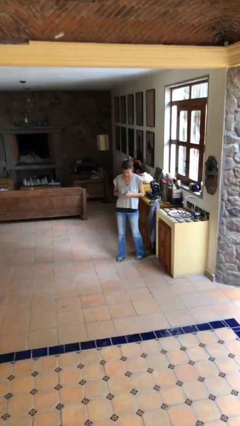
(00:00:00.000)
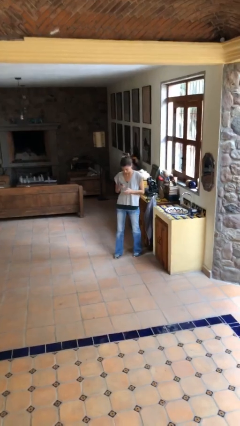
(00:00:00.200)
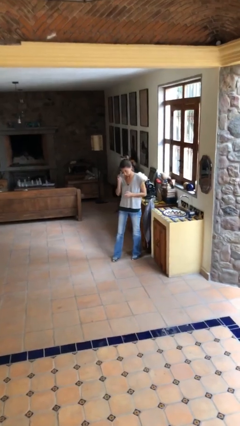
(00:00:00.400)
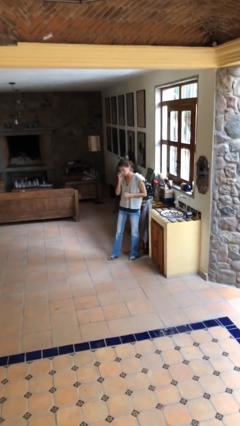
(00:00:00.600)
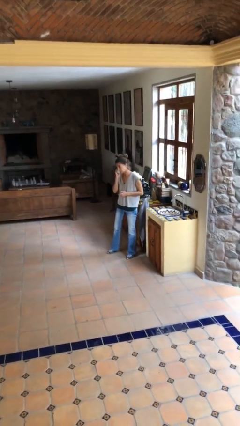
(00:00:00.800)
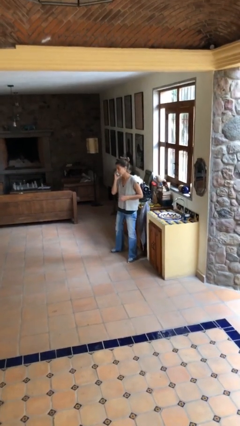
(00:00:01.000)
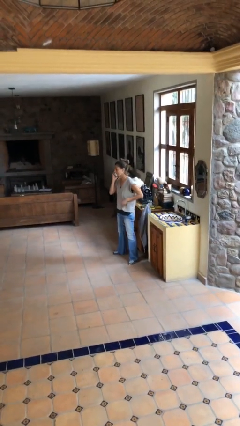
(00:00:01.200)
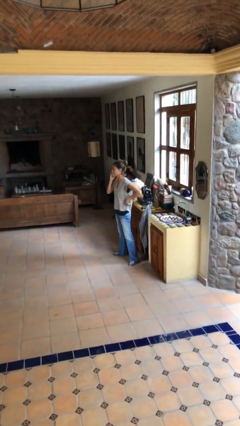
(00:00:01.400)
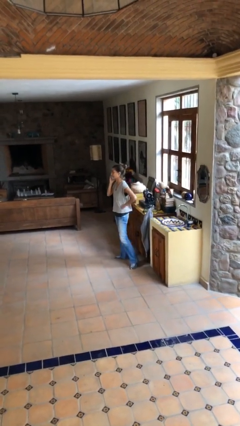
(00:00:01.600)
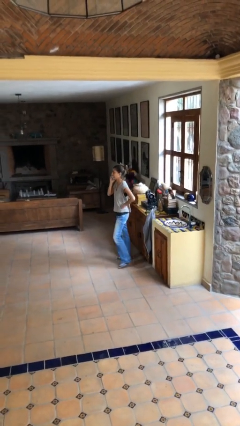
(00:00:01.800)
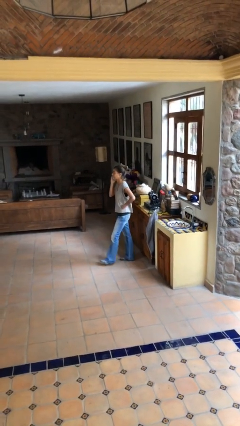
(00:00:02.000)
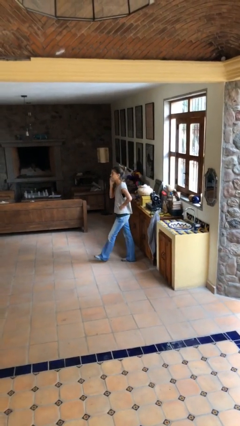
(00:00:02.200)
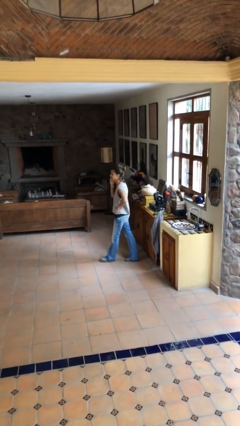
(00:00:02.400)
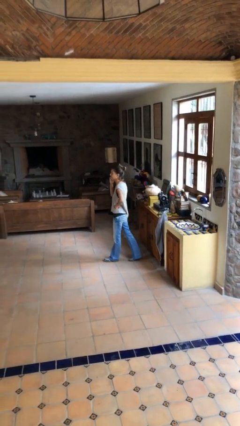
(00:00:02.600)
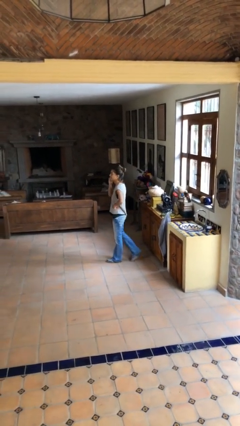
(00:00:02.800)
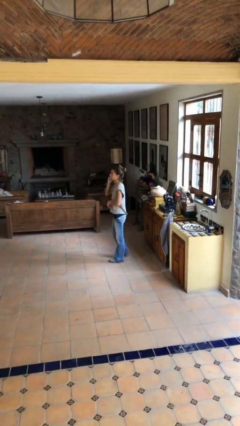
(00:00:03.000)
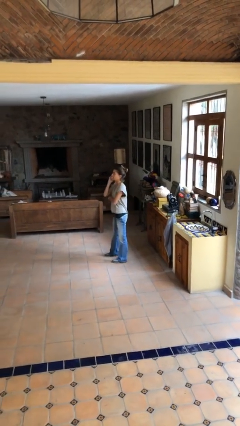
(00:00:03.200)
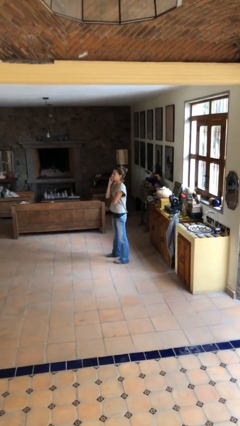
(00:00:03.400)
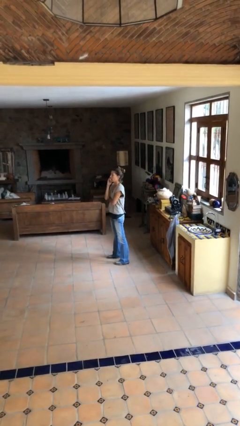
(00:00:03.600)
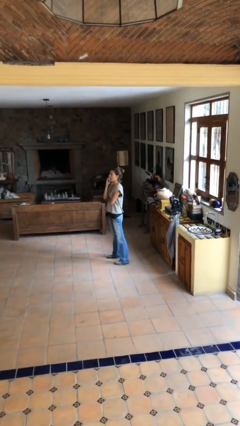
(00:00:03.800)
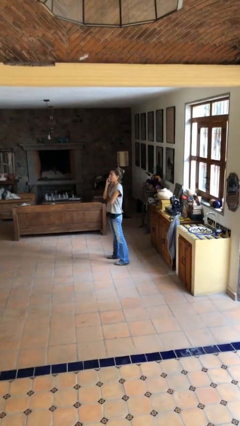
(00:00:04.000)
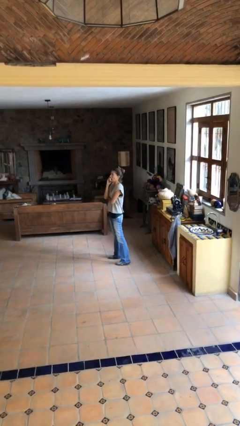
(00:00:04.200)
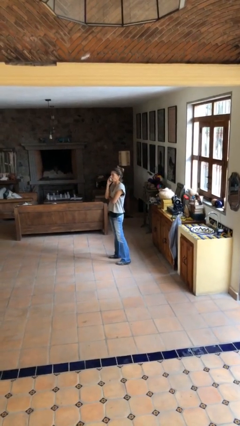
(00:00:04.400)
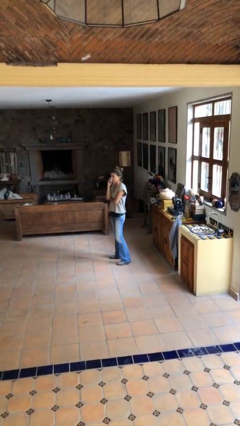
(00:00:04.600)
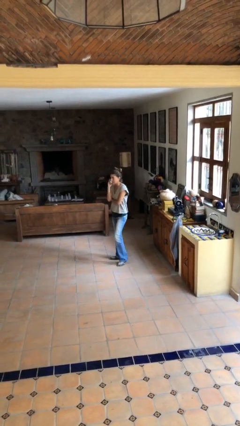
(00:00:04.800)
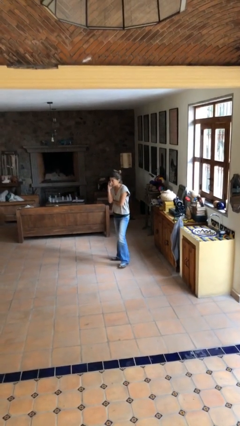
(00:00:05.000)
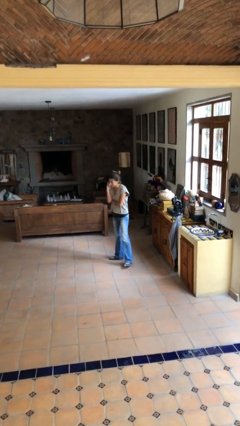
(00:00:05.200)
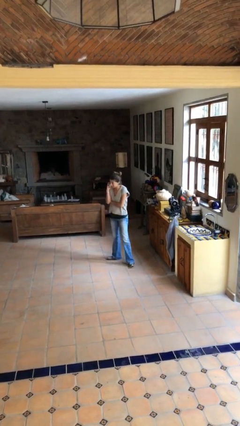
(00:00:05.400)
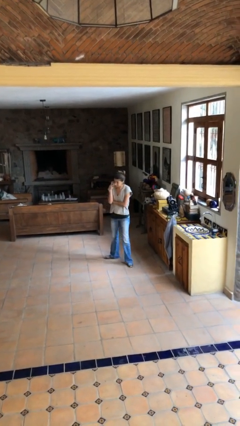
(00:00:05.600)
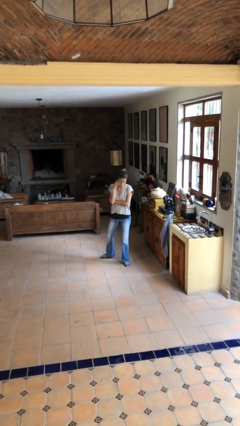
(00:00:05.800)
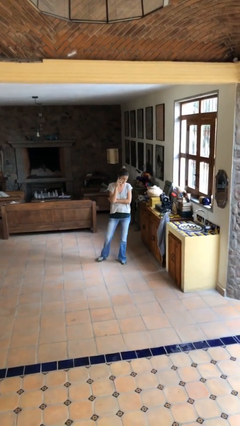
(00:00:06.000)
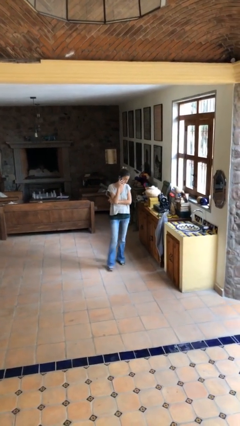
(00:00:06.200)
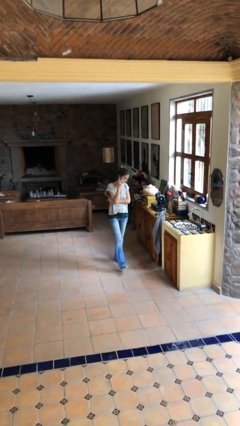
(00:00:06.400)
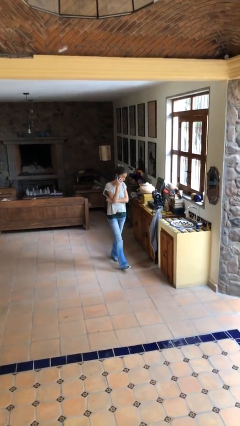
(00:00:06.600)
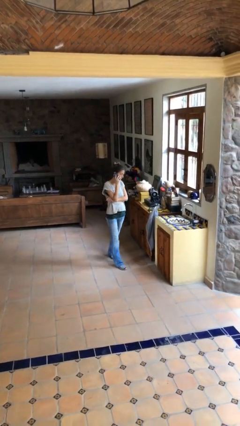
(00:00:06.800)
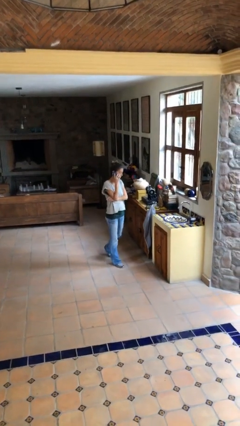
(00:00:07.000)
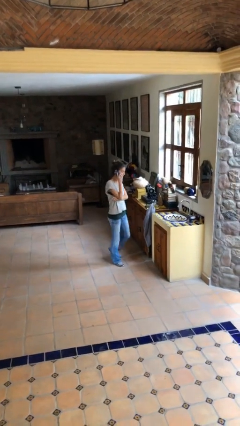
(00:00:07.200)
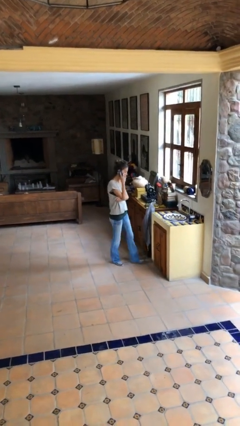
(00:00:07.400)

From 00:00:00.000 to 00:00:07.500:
person talks on phone

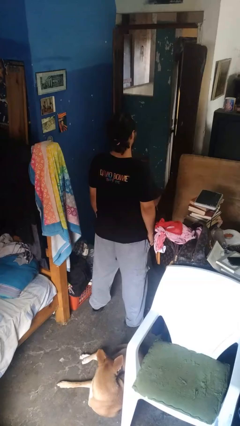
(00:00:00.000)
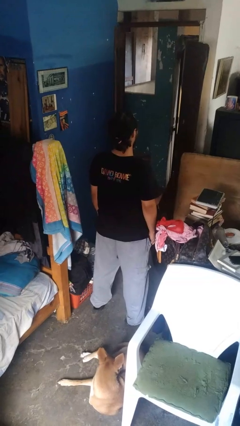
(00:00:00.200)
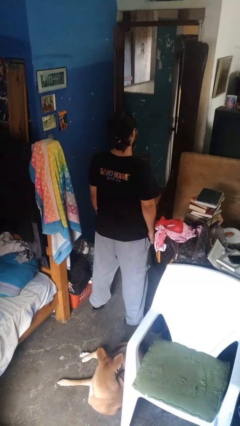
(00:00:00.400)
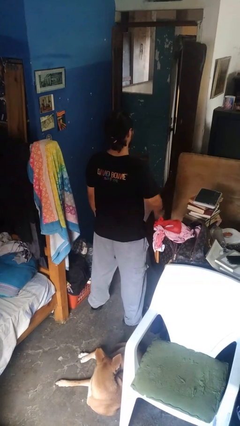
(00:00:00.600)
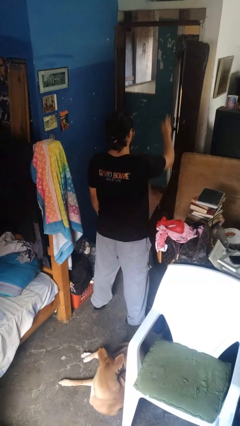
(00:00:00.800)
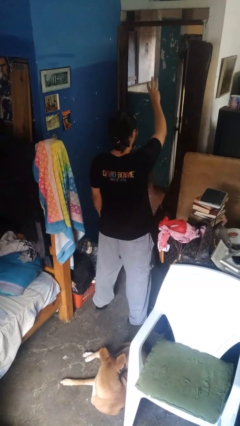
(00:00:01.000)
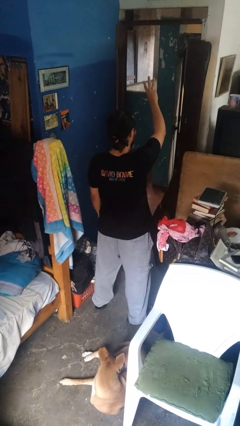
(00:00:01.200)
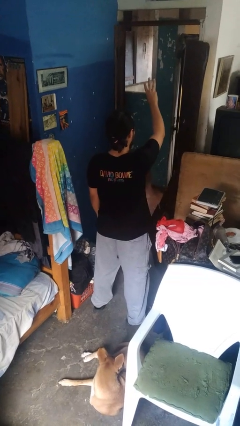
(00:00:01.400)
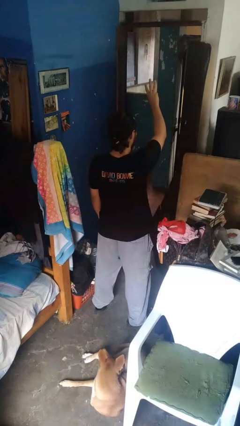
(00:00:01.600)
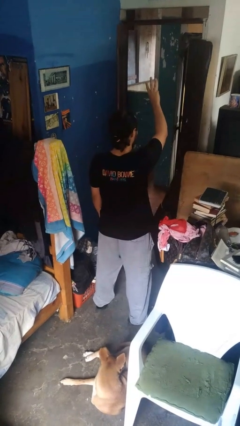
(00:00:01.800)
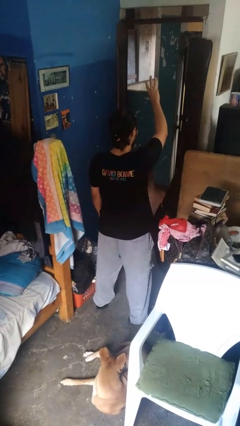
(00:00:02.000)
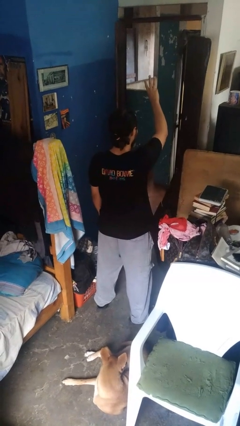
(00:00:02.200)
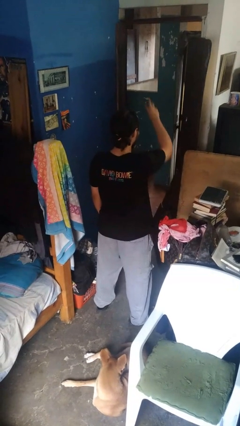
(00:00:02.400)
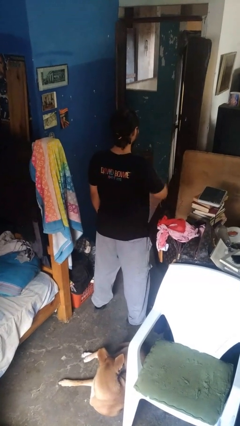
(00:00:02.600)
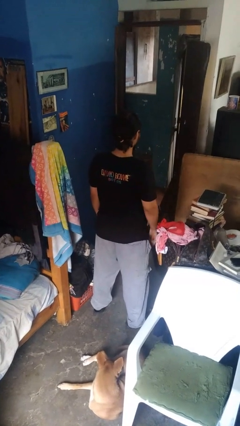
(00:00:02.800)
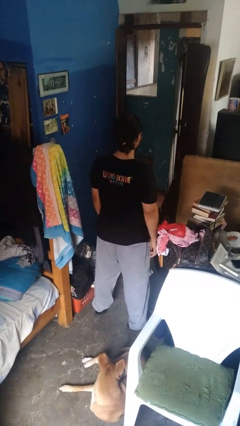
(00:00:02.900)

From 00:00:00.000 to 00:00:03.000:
person gestures number three

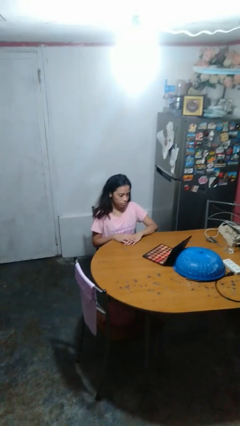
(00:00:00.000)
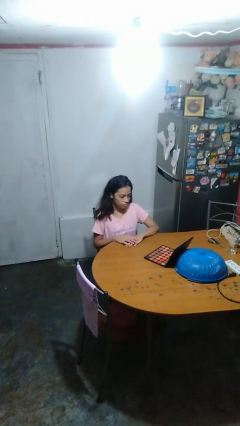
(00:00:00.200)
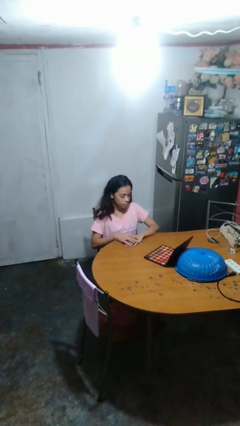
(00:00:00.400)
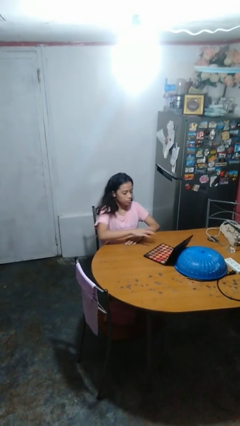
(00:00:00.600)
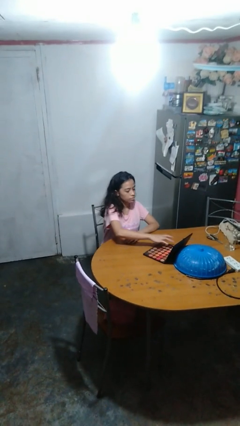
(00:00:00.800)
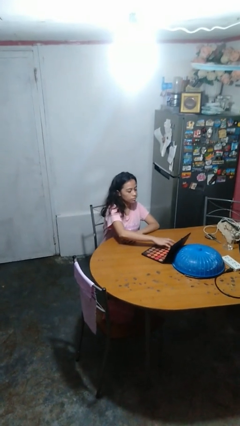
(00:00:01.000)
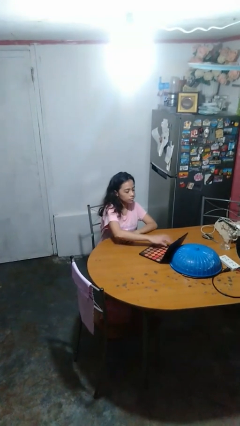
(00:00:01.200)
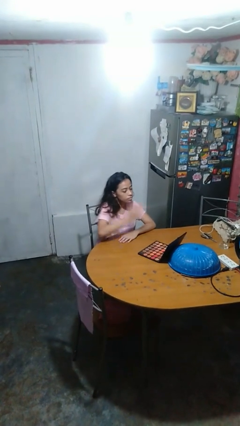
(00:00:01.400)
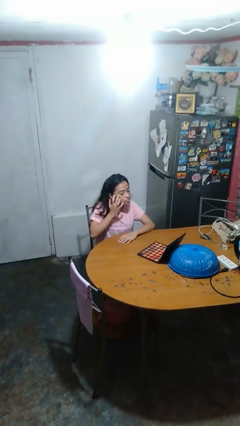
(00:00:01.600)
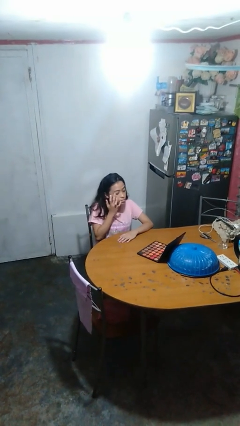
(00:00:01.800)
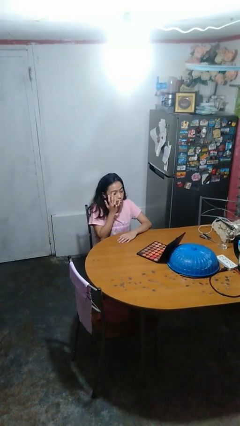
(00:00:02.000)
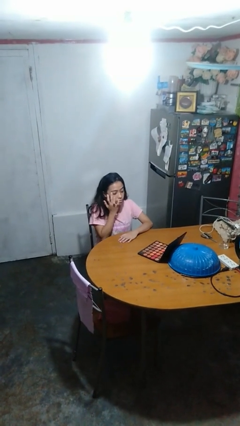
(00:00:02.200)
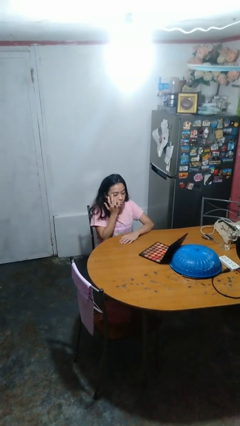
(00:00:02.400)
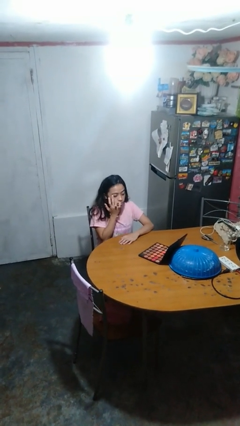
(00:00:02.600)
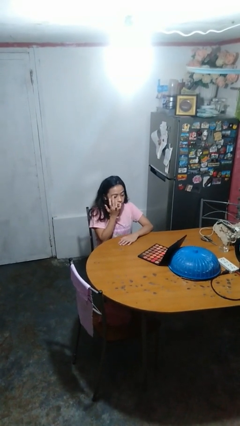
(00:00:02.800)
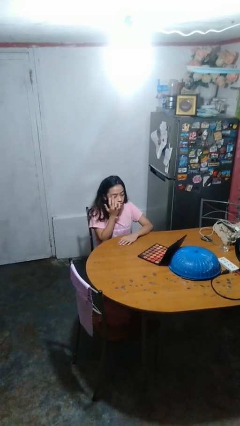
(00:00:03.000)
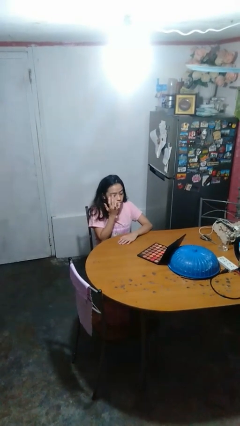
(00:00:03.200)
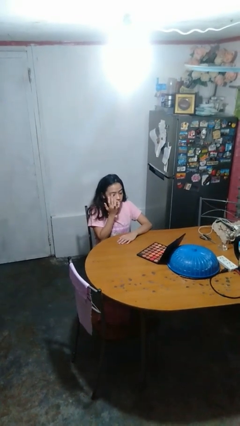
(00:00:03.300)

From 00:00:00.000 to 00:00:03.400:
person applies eye makeup

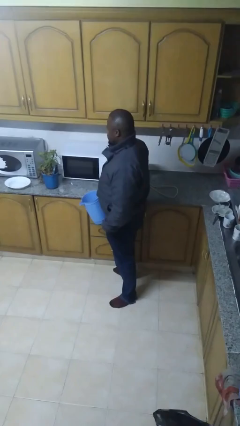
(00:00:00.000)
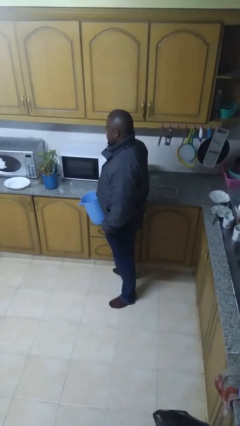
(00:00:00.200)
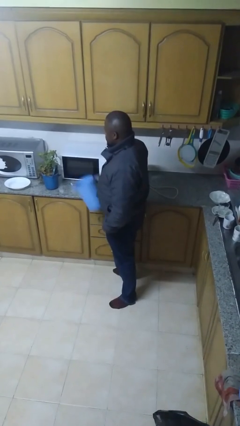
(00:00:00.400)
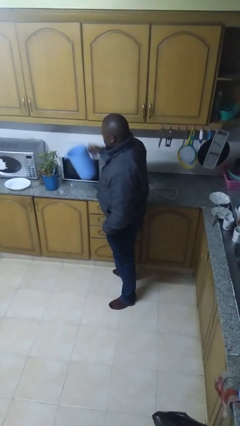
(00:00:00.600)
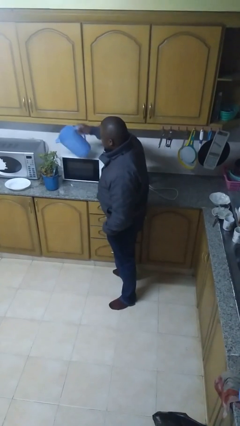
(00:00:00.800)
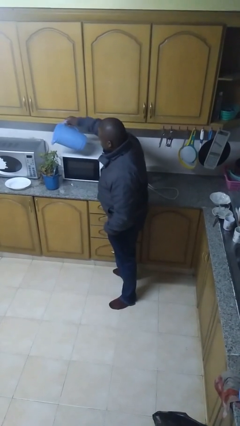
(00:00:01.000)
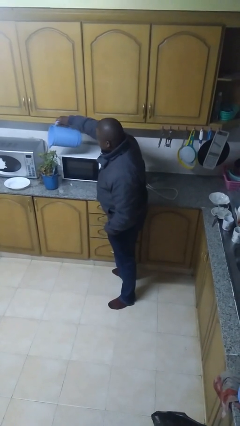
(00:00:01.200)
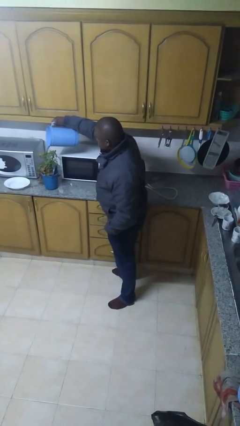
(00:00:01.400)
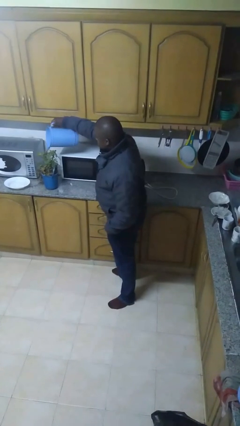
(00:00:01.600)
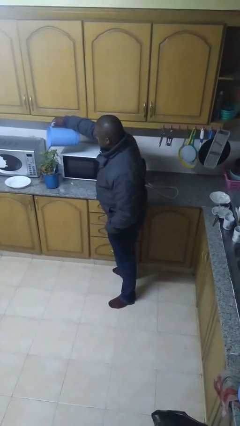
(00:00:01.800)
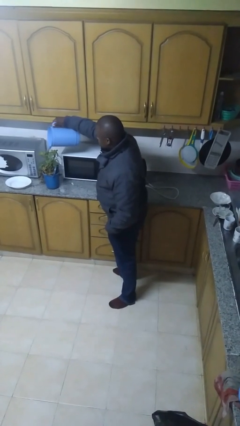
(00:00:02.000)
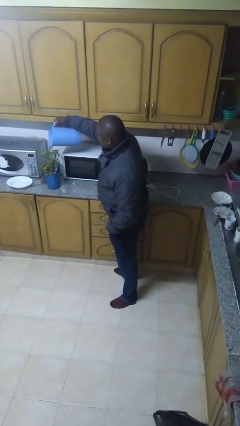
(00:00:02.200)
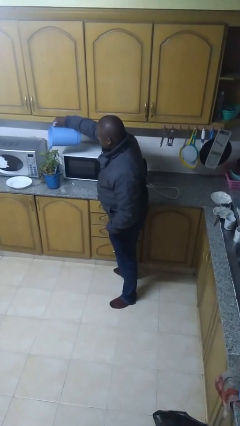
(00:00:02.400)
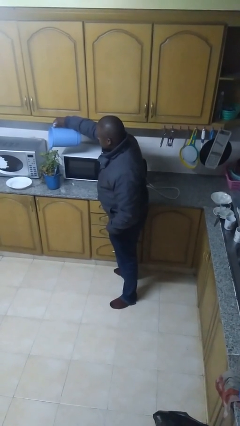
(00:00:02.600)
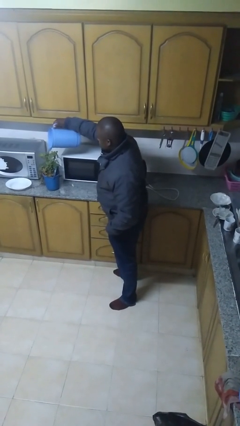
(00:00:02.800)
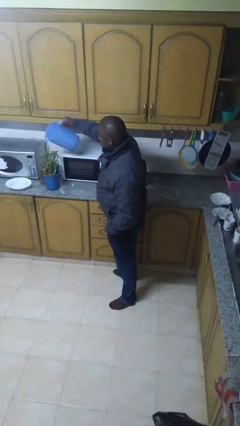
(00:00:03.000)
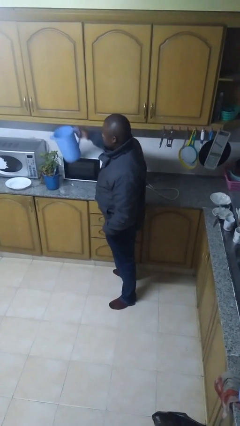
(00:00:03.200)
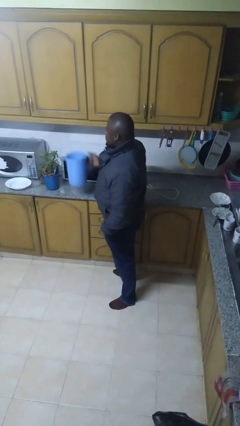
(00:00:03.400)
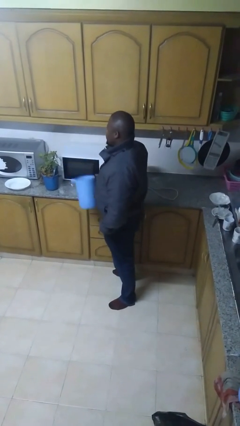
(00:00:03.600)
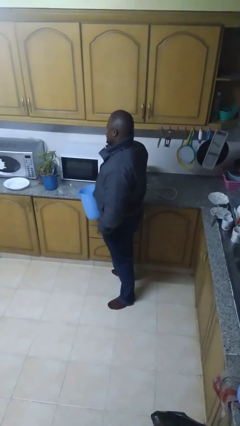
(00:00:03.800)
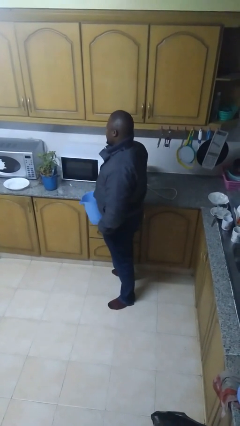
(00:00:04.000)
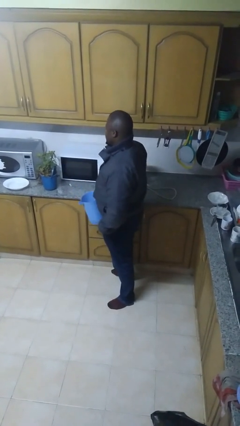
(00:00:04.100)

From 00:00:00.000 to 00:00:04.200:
person waters houseplant
